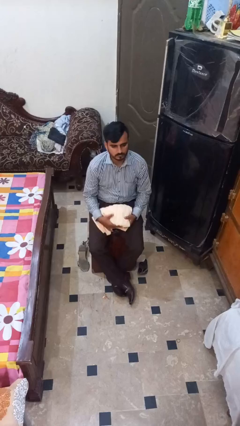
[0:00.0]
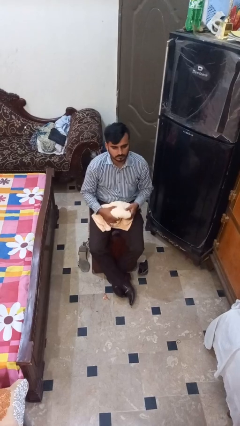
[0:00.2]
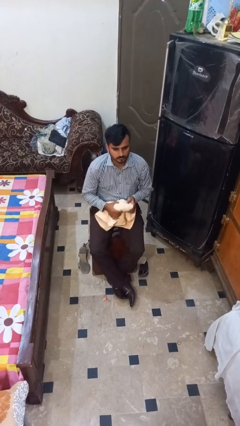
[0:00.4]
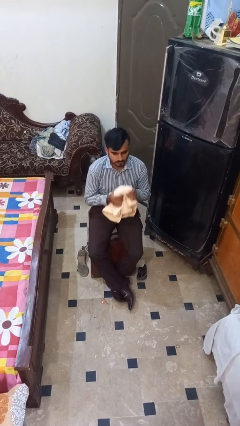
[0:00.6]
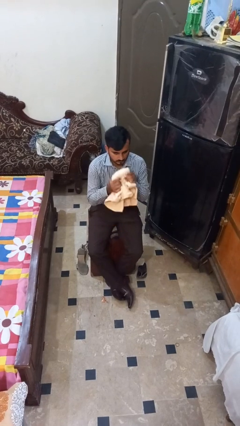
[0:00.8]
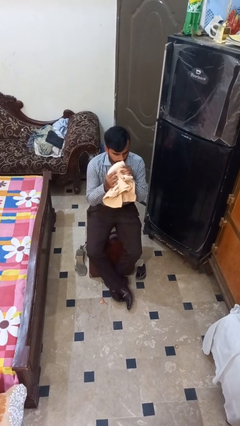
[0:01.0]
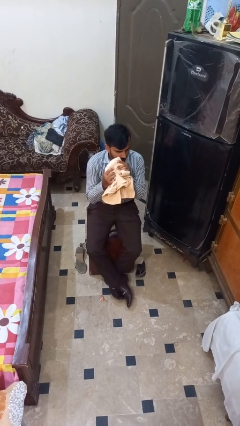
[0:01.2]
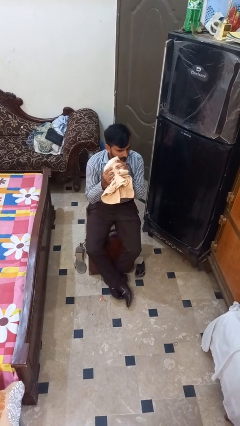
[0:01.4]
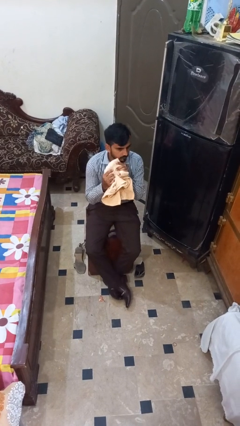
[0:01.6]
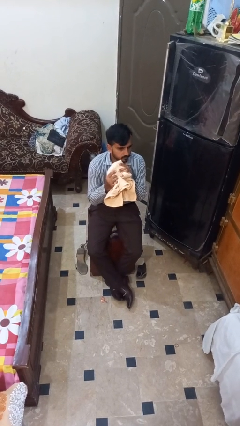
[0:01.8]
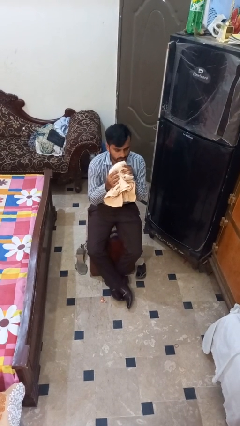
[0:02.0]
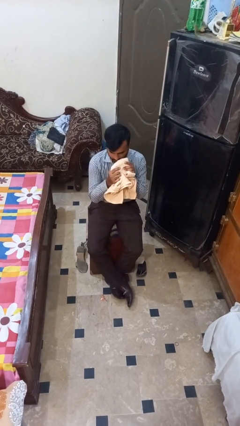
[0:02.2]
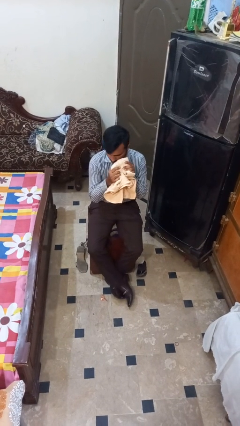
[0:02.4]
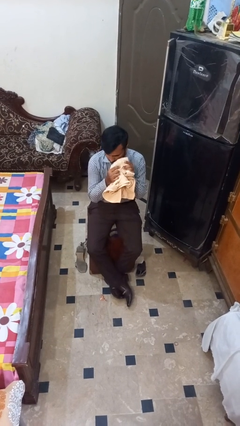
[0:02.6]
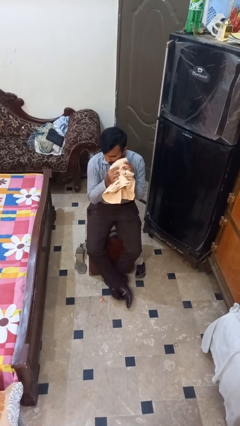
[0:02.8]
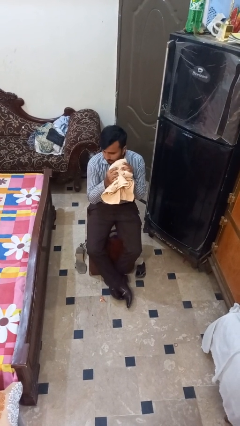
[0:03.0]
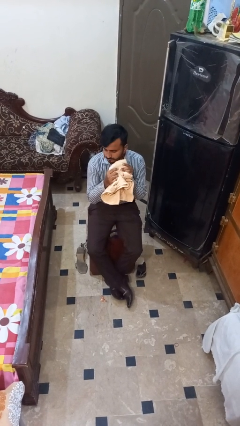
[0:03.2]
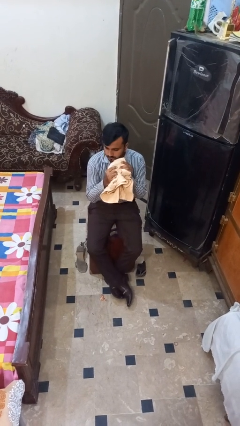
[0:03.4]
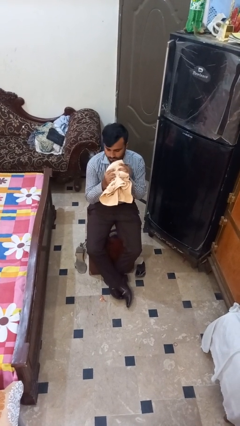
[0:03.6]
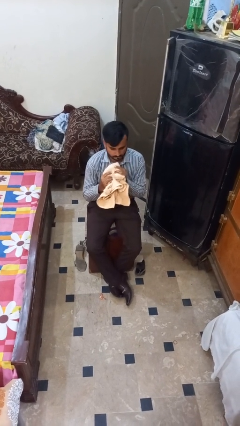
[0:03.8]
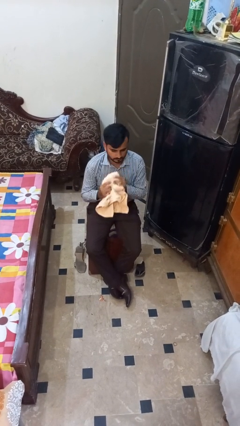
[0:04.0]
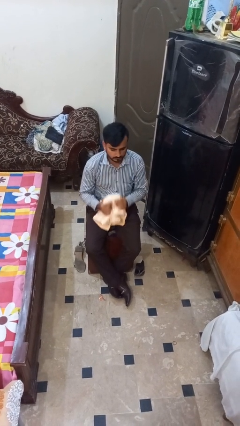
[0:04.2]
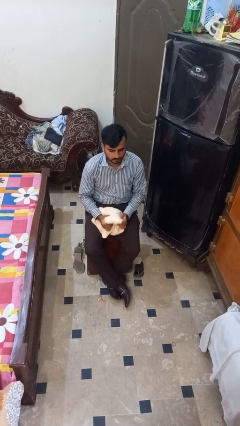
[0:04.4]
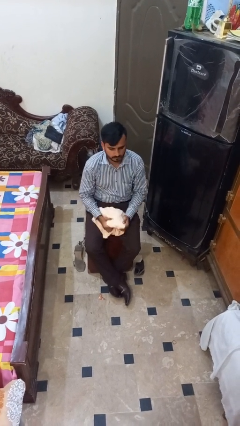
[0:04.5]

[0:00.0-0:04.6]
person wipes mouth with napkin

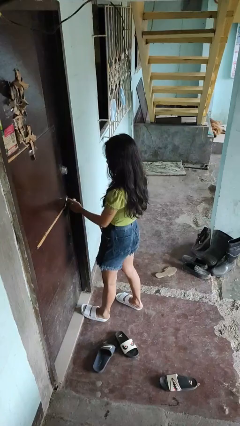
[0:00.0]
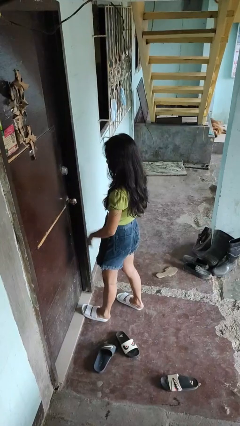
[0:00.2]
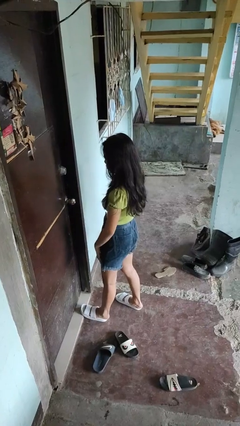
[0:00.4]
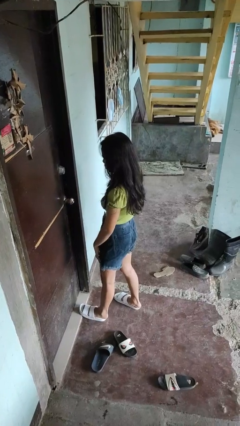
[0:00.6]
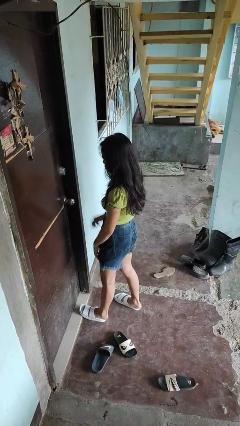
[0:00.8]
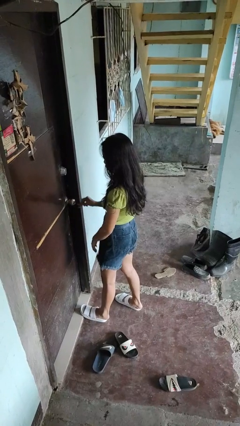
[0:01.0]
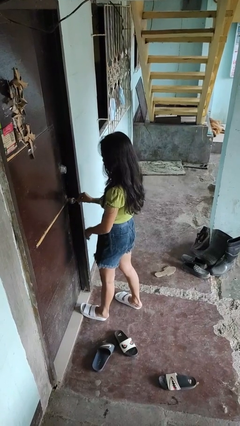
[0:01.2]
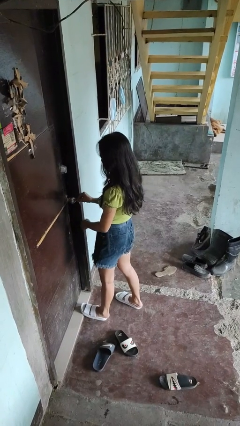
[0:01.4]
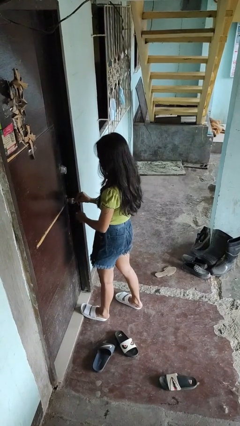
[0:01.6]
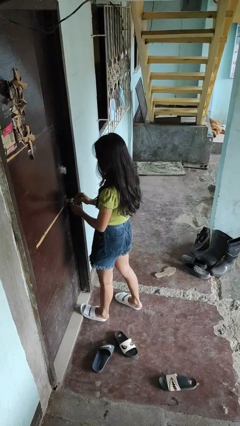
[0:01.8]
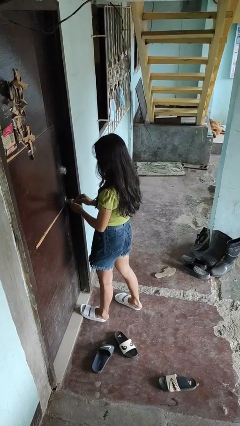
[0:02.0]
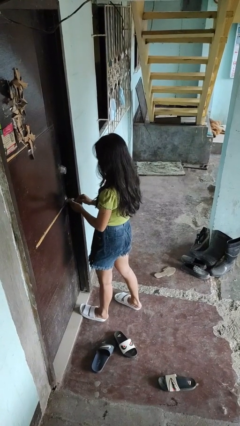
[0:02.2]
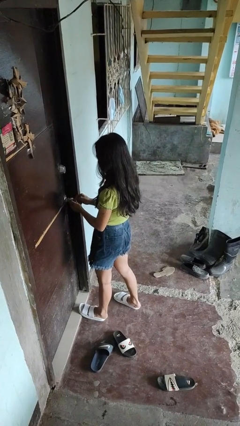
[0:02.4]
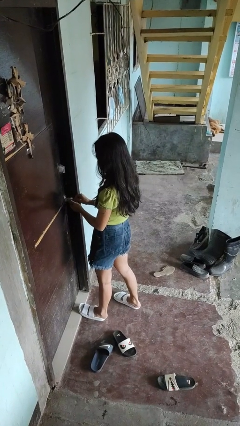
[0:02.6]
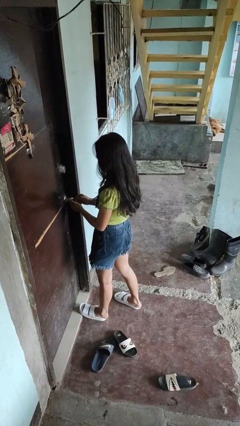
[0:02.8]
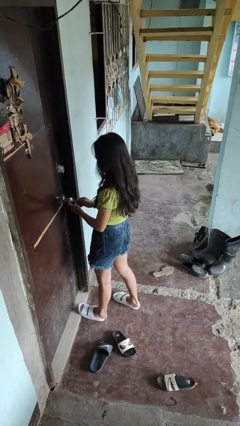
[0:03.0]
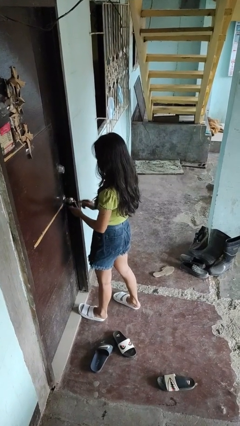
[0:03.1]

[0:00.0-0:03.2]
person locks door with keys

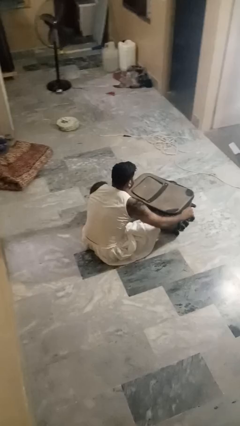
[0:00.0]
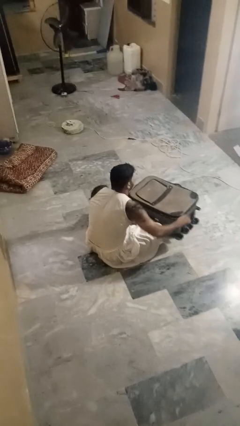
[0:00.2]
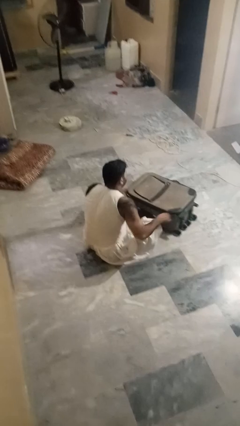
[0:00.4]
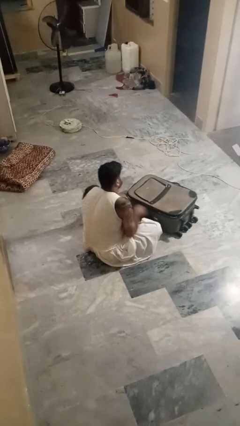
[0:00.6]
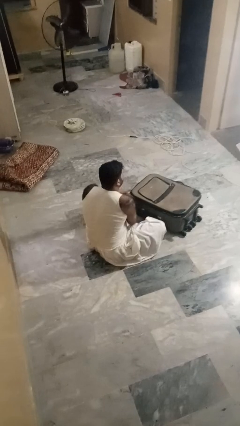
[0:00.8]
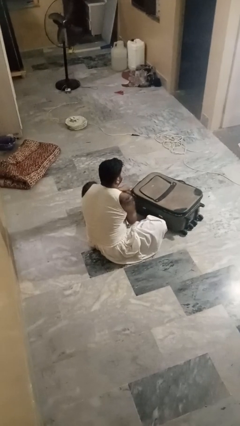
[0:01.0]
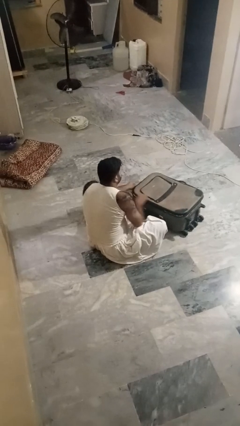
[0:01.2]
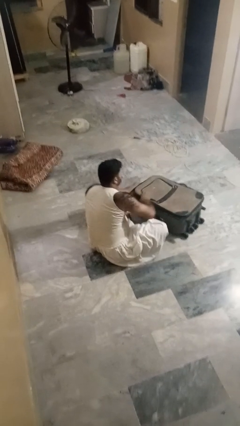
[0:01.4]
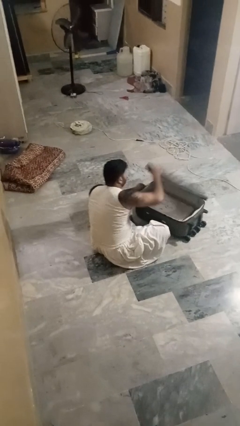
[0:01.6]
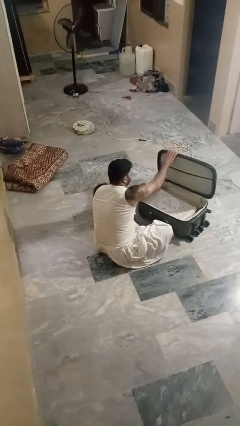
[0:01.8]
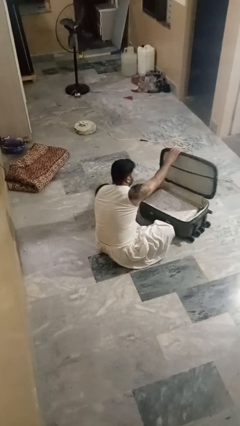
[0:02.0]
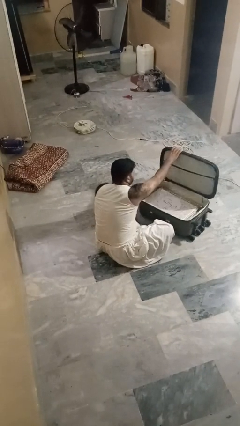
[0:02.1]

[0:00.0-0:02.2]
person opens suitcase

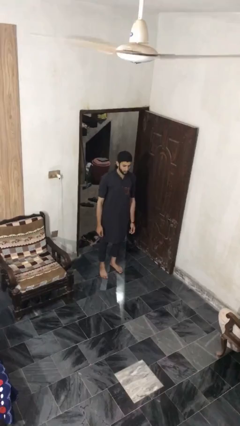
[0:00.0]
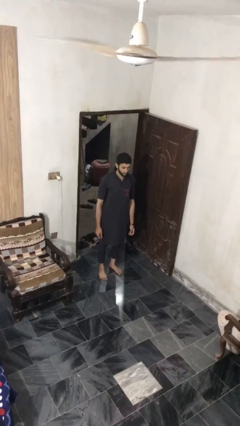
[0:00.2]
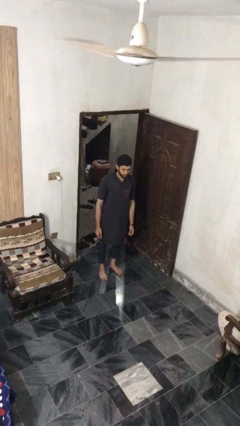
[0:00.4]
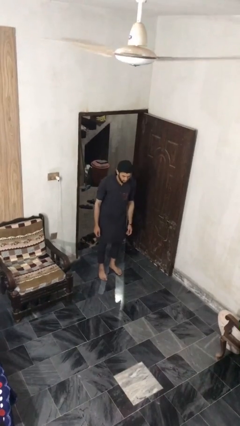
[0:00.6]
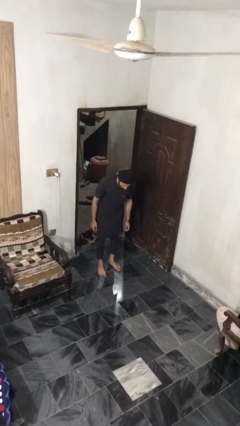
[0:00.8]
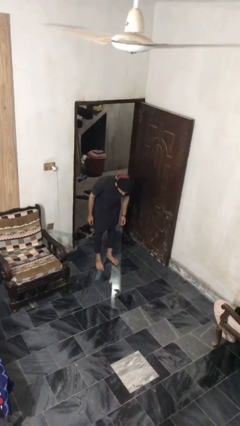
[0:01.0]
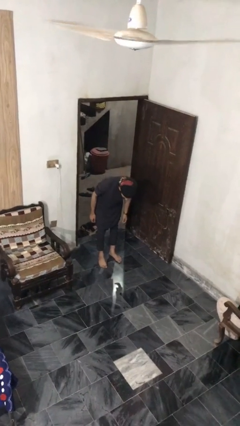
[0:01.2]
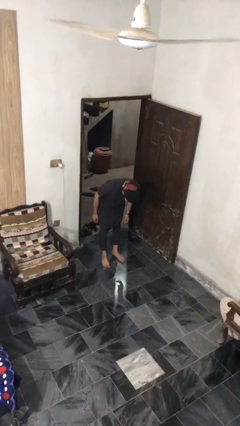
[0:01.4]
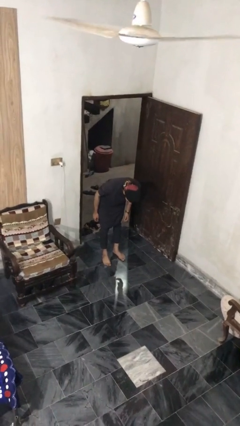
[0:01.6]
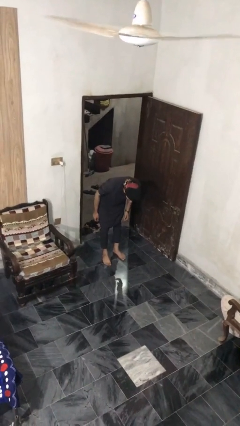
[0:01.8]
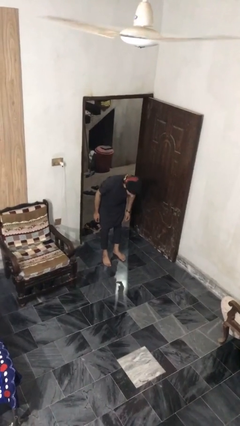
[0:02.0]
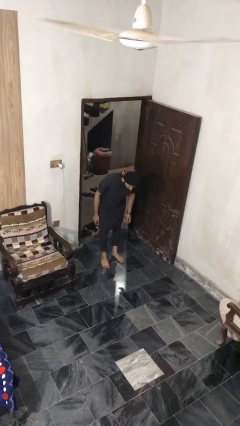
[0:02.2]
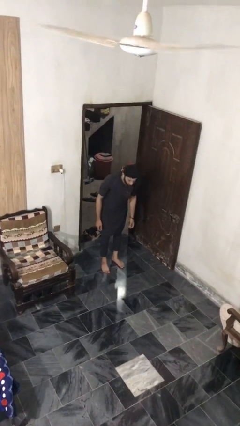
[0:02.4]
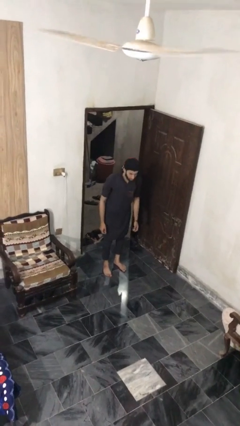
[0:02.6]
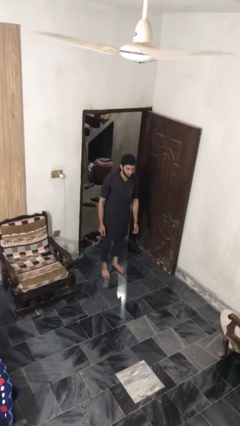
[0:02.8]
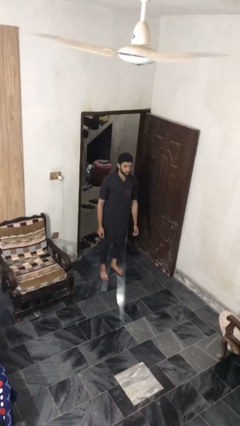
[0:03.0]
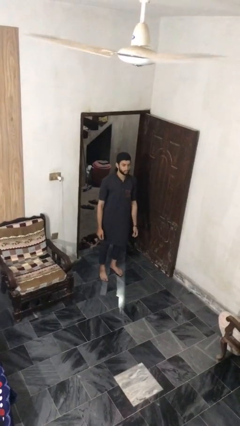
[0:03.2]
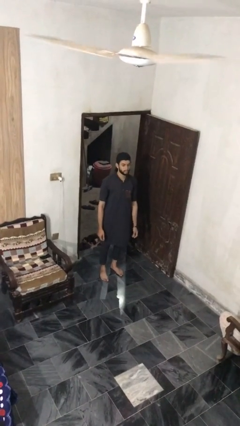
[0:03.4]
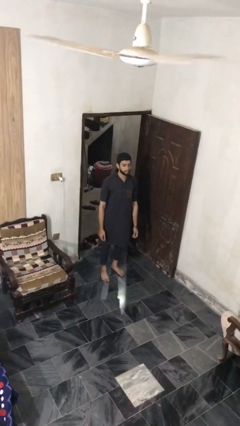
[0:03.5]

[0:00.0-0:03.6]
person bows

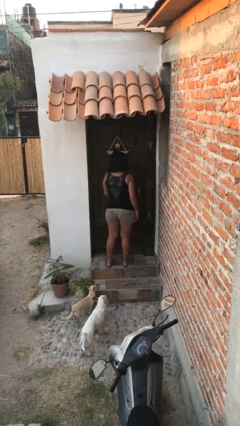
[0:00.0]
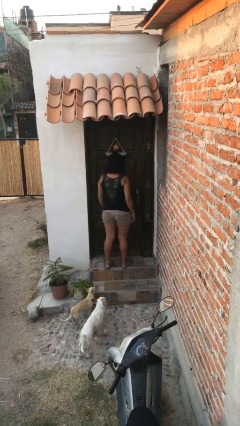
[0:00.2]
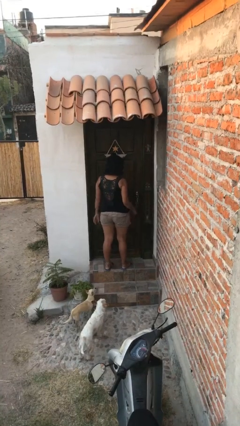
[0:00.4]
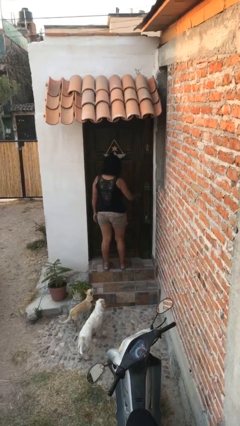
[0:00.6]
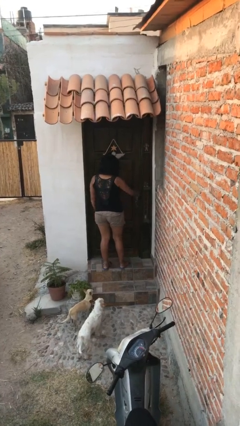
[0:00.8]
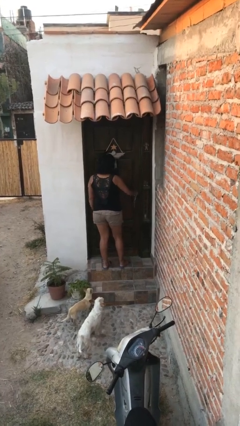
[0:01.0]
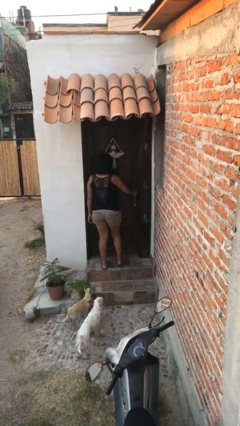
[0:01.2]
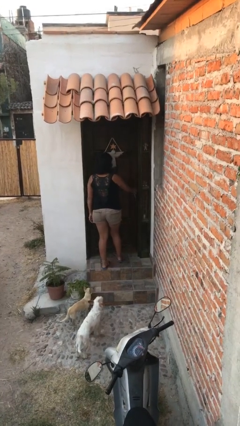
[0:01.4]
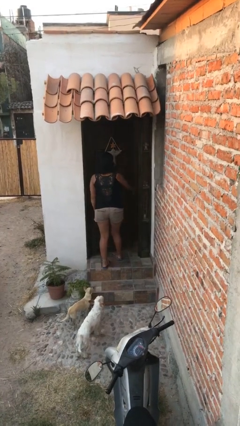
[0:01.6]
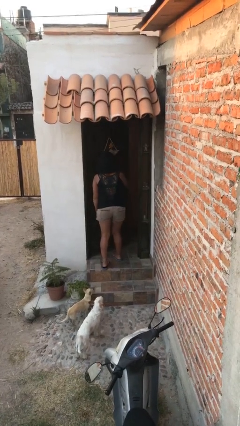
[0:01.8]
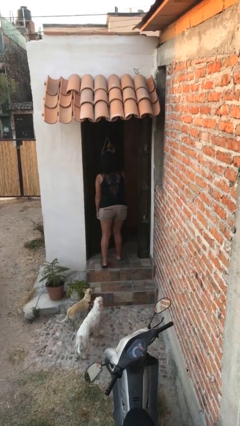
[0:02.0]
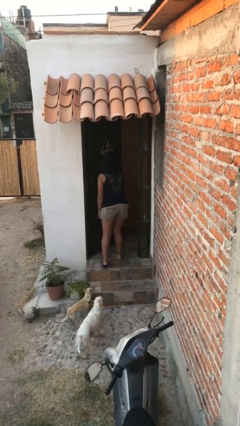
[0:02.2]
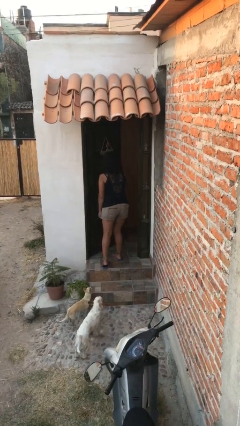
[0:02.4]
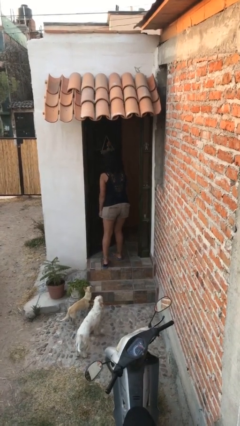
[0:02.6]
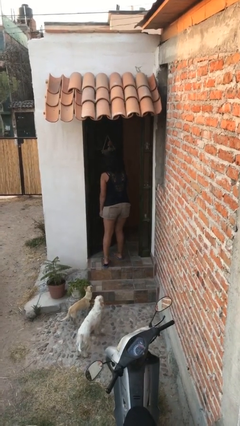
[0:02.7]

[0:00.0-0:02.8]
person opens facility door

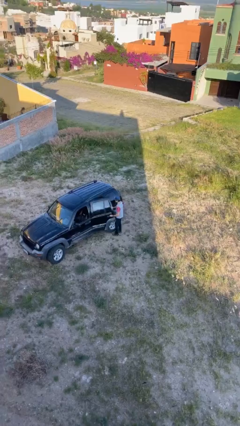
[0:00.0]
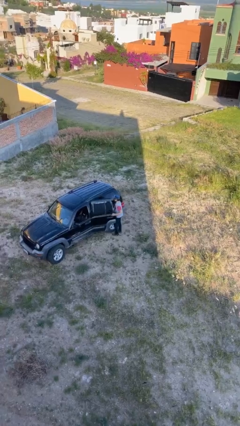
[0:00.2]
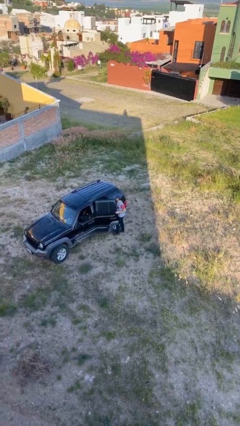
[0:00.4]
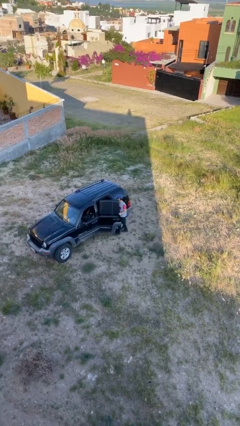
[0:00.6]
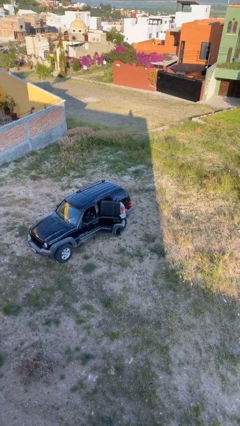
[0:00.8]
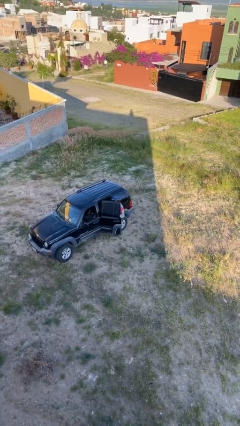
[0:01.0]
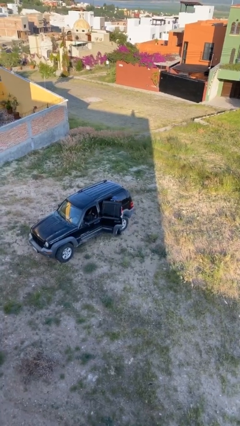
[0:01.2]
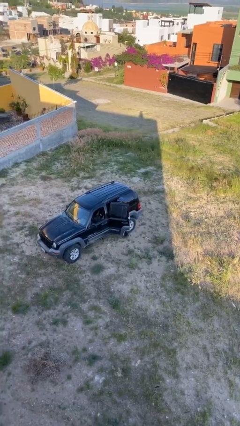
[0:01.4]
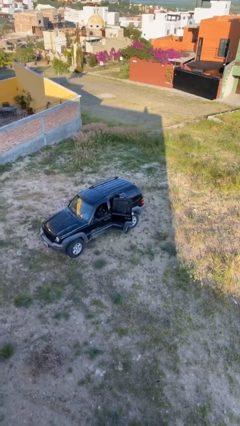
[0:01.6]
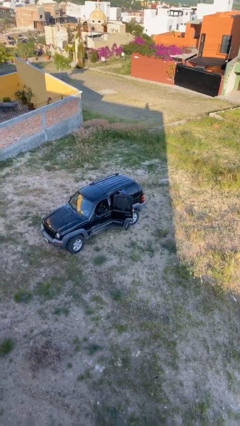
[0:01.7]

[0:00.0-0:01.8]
person opens car door
